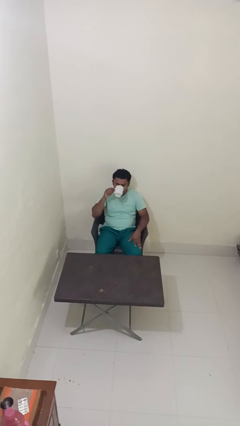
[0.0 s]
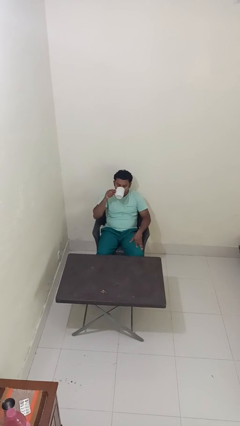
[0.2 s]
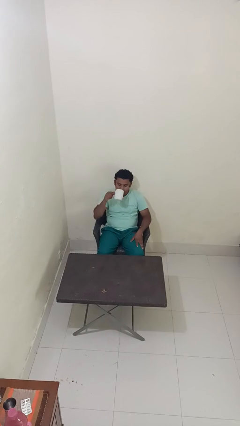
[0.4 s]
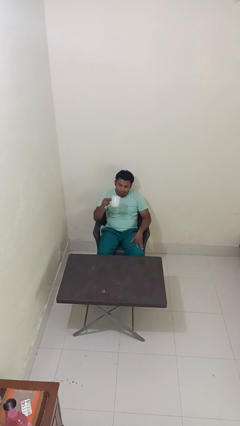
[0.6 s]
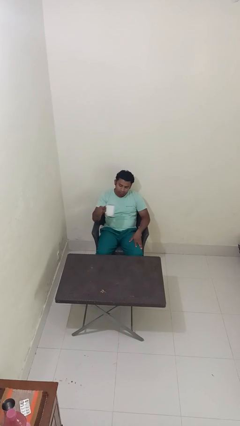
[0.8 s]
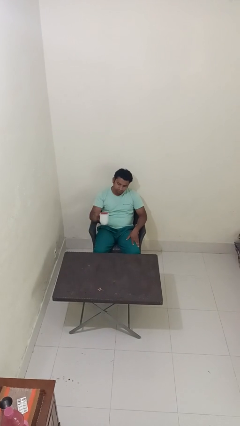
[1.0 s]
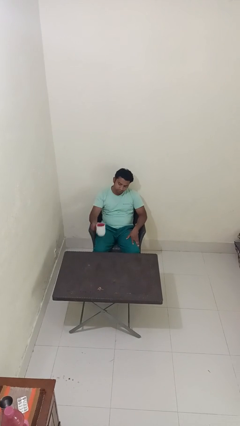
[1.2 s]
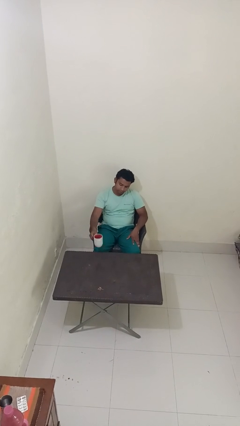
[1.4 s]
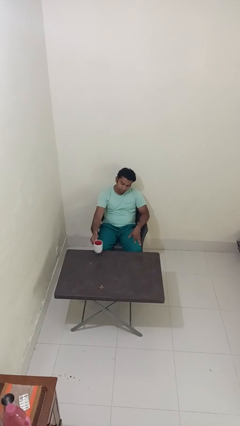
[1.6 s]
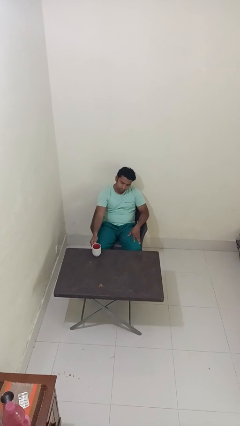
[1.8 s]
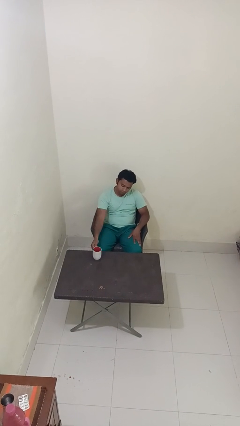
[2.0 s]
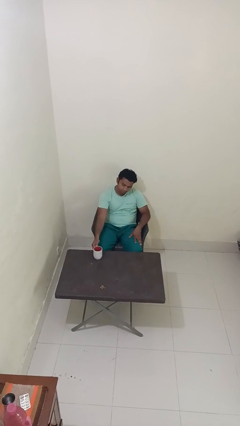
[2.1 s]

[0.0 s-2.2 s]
person puts down object on table

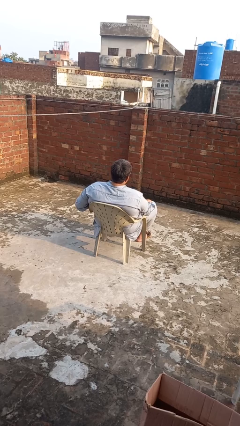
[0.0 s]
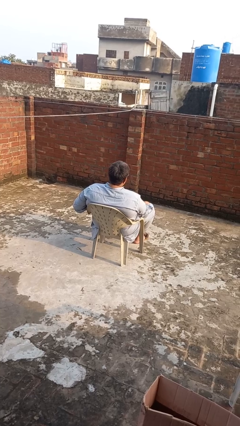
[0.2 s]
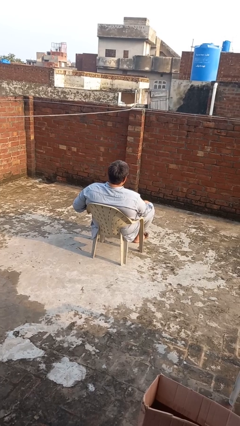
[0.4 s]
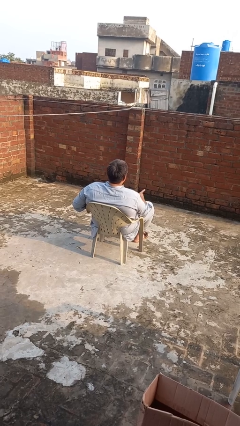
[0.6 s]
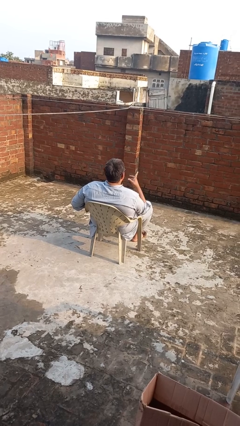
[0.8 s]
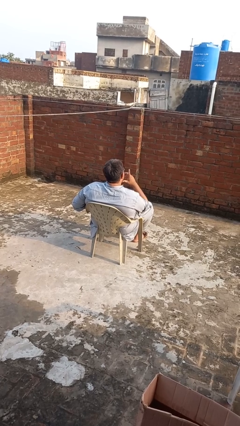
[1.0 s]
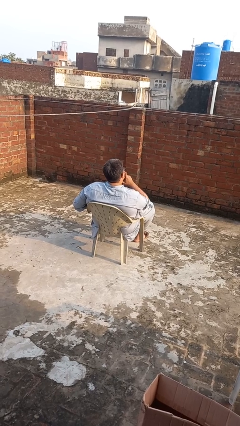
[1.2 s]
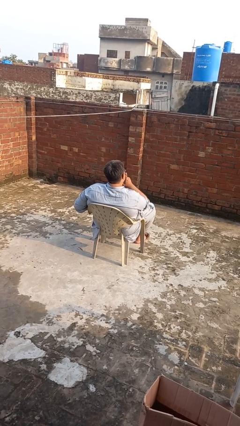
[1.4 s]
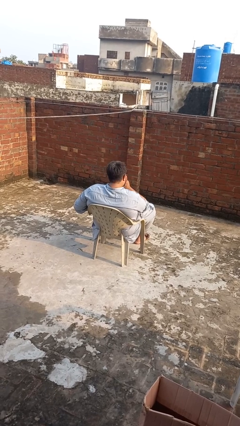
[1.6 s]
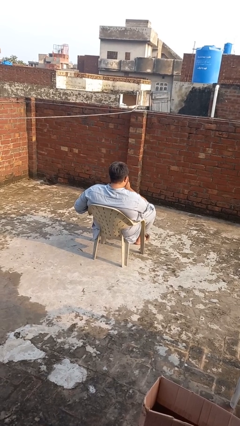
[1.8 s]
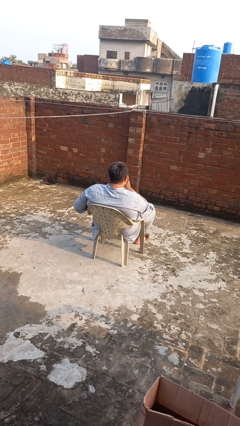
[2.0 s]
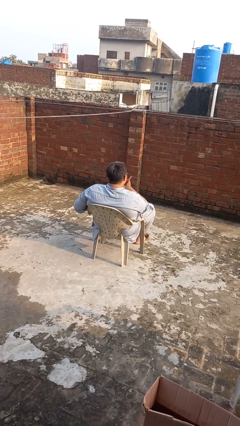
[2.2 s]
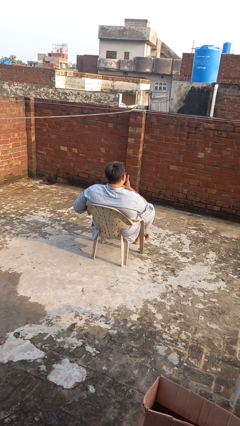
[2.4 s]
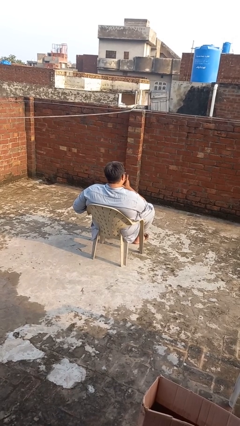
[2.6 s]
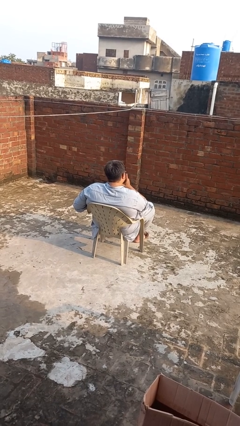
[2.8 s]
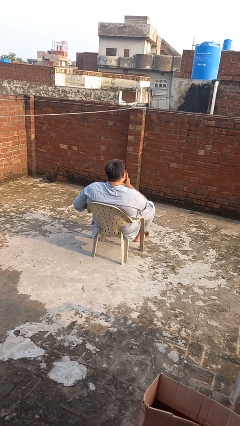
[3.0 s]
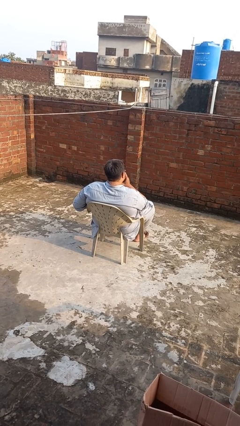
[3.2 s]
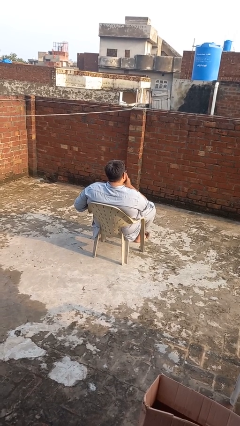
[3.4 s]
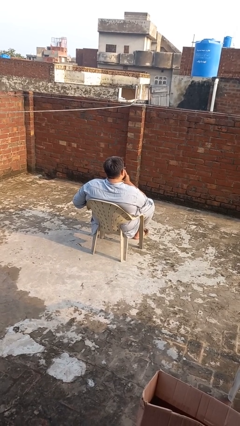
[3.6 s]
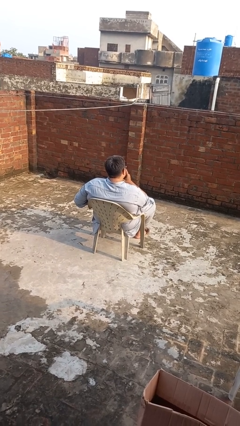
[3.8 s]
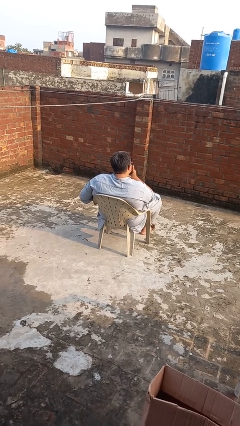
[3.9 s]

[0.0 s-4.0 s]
person strokes chin

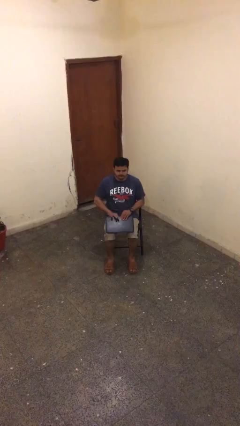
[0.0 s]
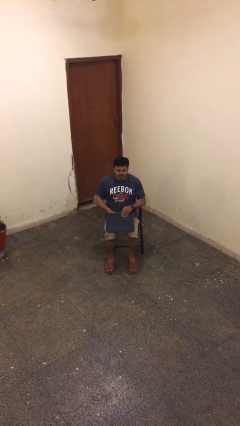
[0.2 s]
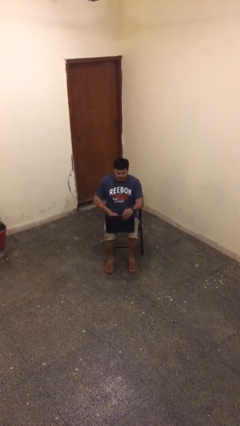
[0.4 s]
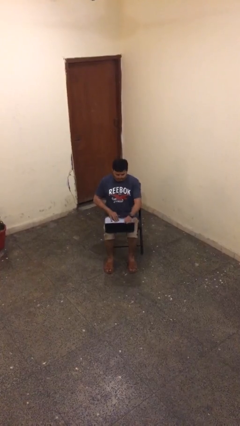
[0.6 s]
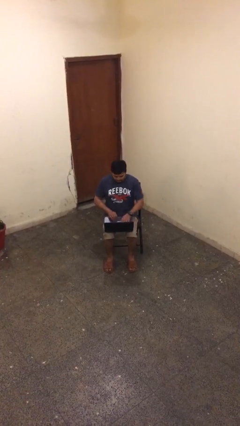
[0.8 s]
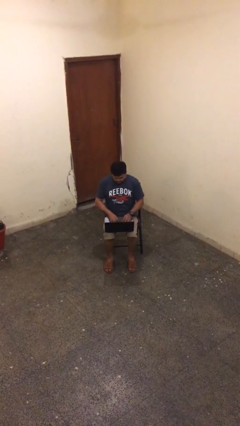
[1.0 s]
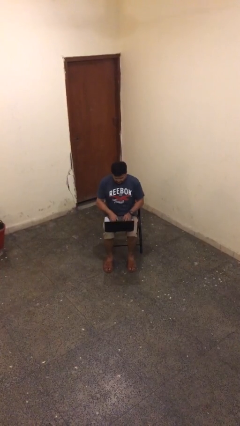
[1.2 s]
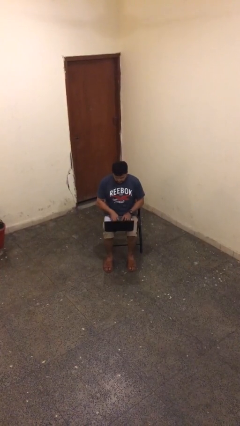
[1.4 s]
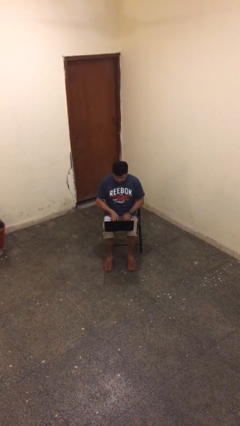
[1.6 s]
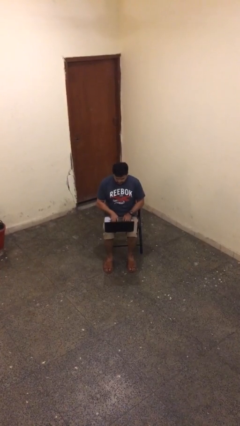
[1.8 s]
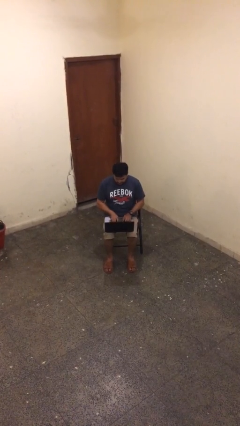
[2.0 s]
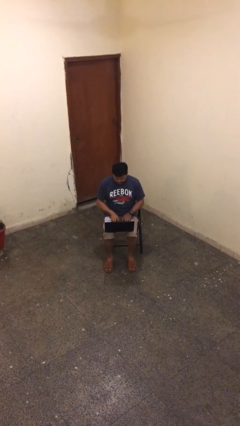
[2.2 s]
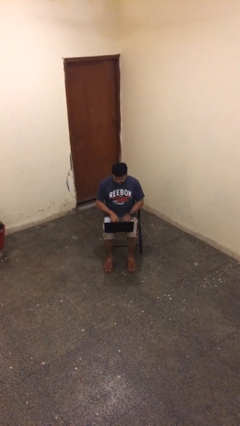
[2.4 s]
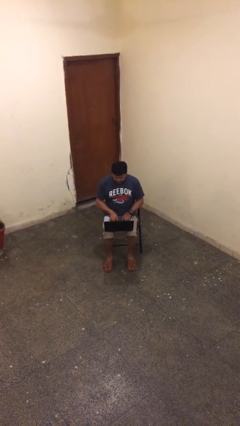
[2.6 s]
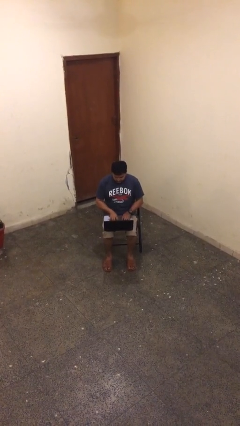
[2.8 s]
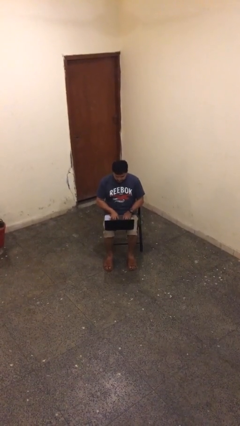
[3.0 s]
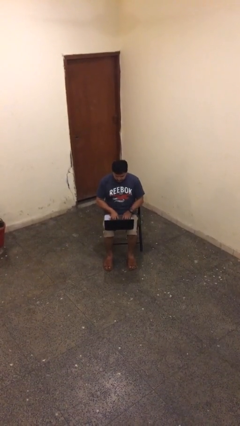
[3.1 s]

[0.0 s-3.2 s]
person interacts with laptop

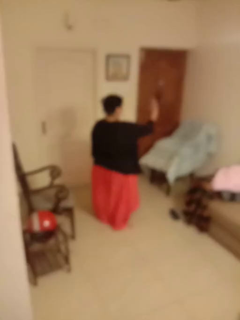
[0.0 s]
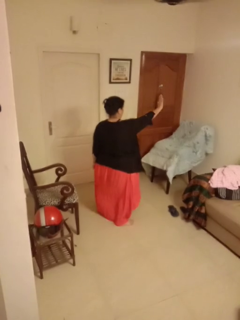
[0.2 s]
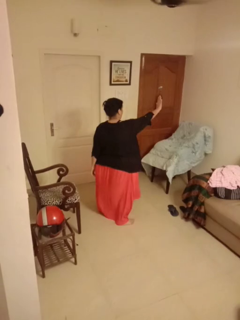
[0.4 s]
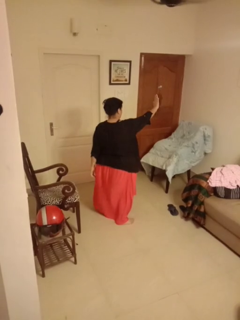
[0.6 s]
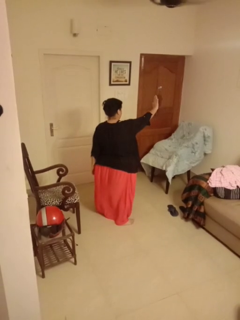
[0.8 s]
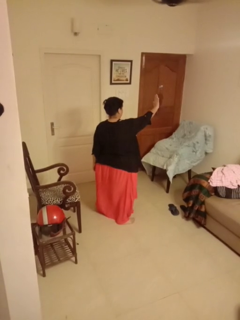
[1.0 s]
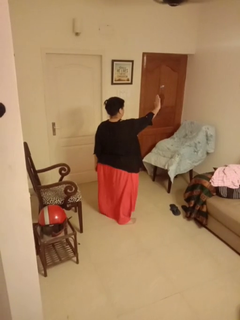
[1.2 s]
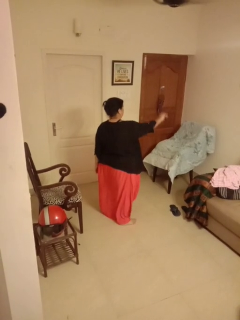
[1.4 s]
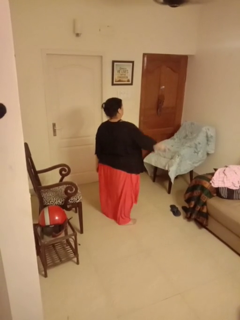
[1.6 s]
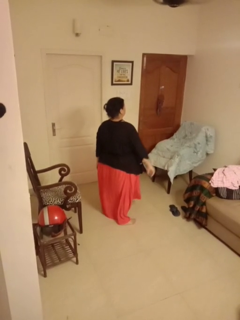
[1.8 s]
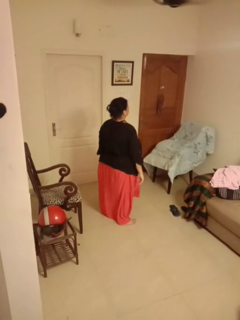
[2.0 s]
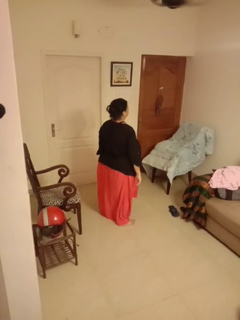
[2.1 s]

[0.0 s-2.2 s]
person gestures stop

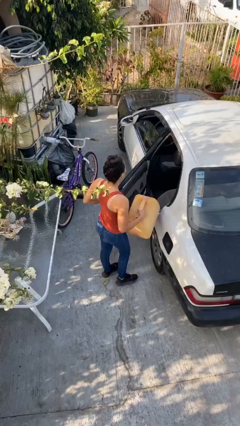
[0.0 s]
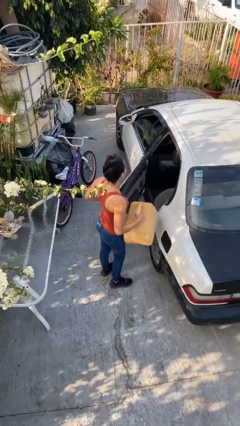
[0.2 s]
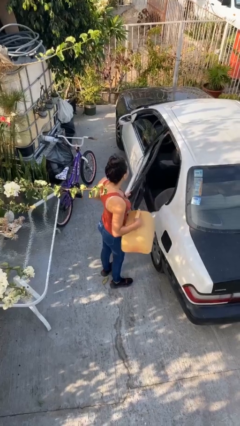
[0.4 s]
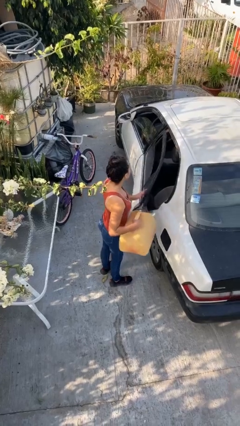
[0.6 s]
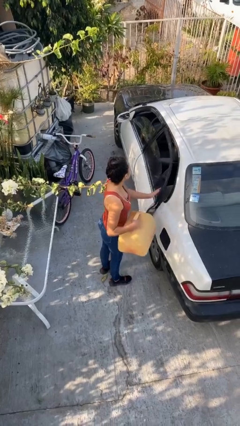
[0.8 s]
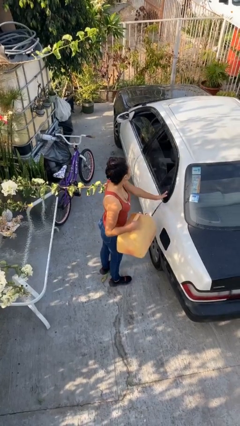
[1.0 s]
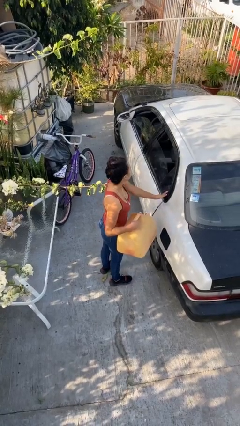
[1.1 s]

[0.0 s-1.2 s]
person closes car door

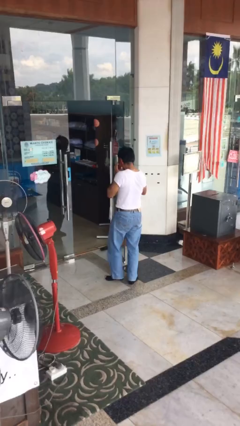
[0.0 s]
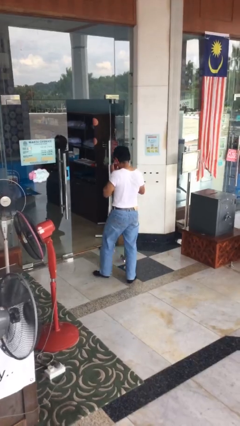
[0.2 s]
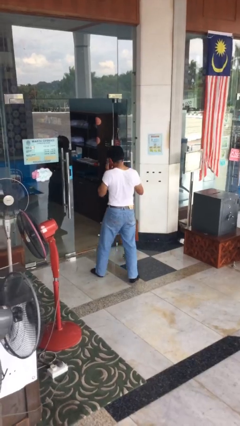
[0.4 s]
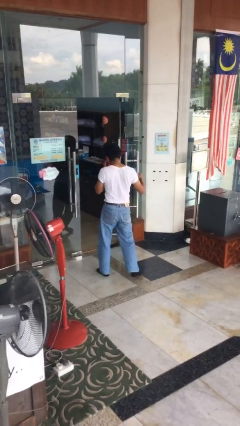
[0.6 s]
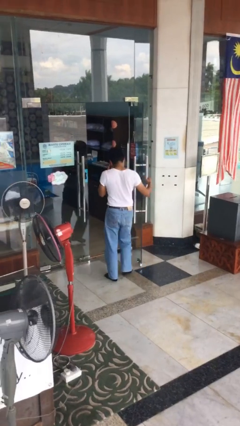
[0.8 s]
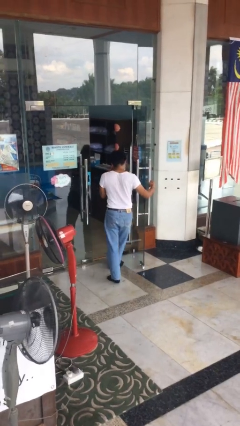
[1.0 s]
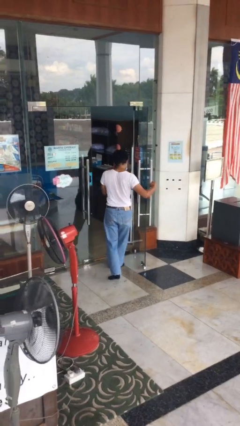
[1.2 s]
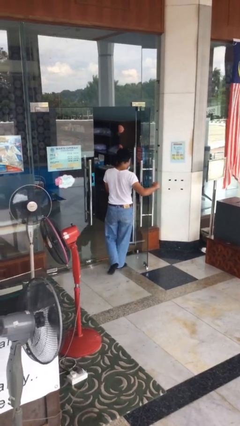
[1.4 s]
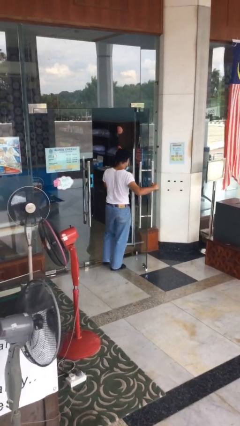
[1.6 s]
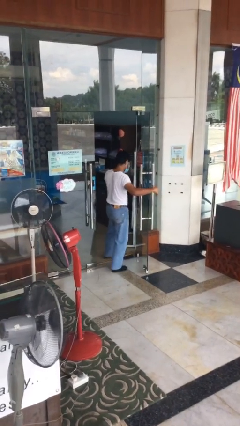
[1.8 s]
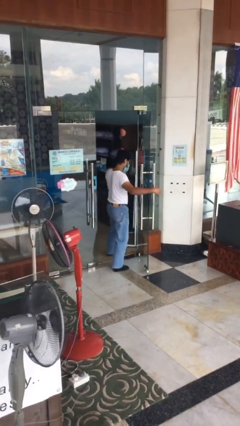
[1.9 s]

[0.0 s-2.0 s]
person exits scene through structure

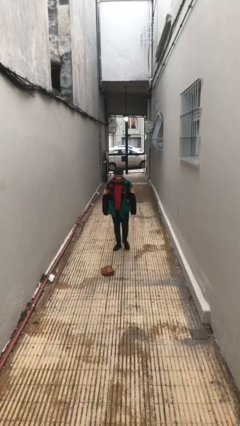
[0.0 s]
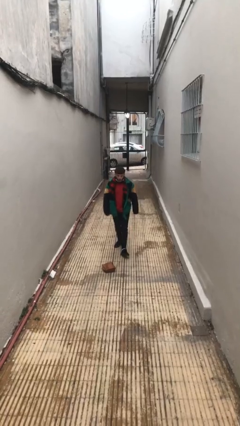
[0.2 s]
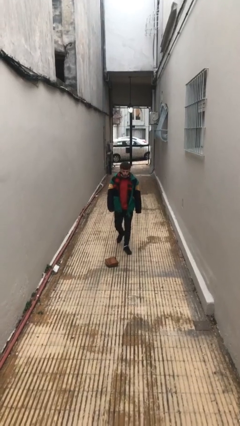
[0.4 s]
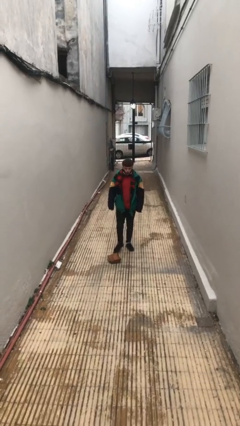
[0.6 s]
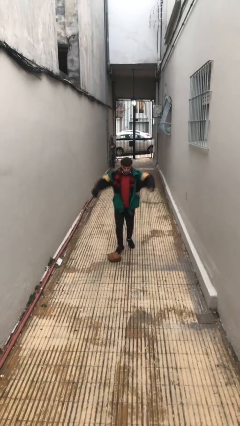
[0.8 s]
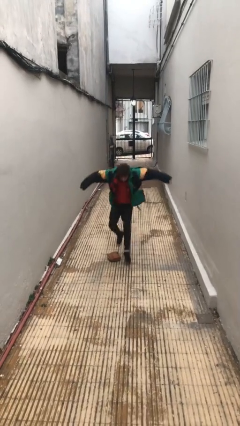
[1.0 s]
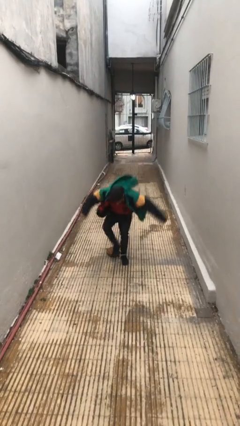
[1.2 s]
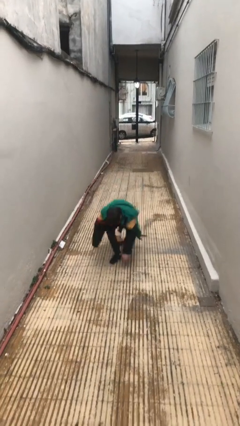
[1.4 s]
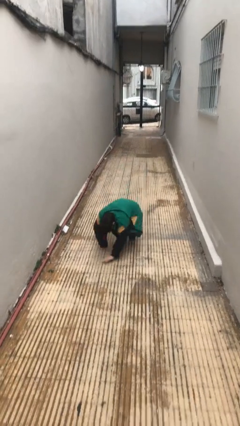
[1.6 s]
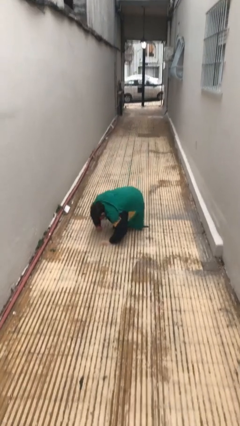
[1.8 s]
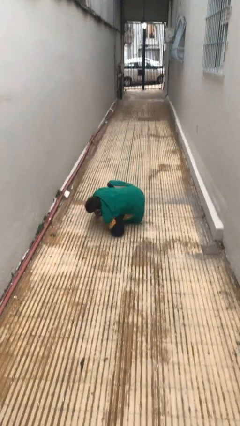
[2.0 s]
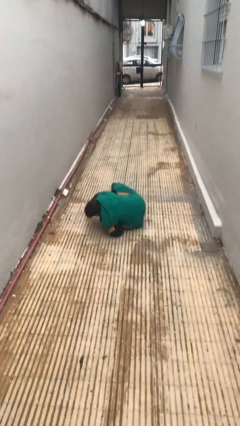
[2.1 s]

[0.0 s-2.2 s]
person trips on object on floor

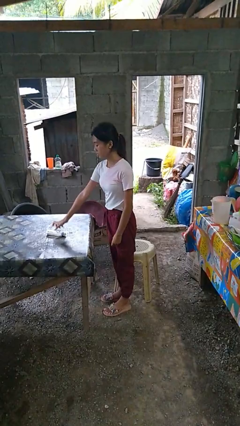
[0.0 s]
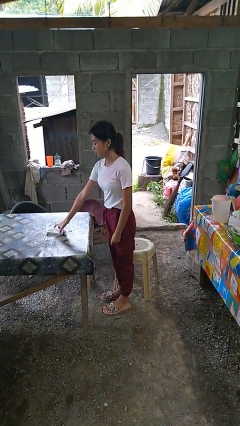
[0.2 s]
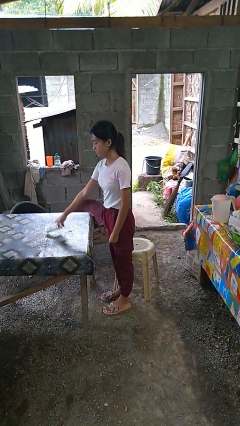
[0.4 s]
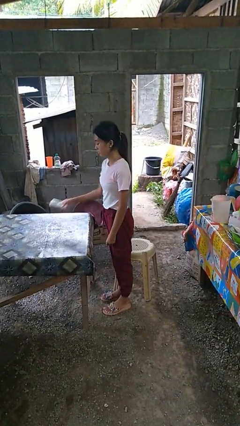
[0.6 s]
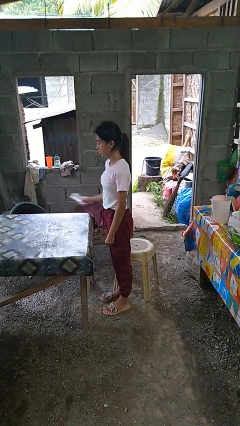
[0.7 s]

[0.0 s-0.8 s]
person picks up object from table
